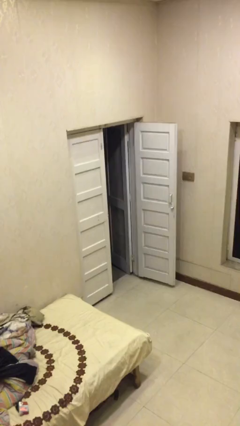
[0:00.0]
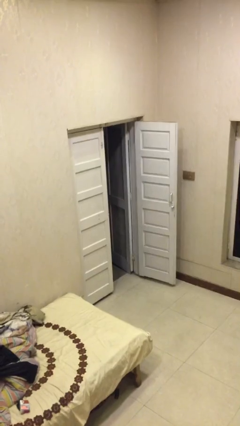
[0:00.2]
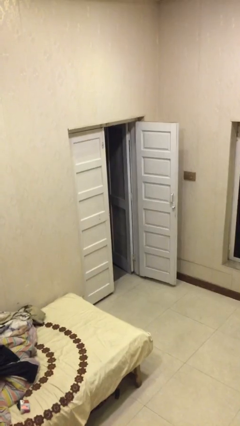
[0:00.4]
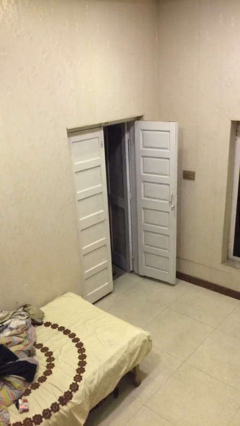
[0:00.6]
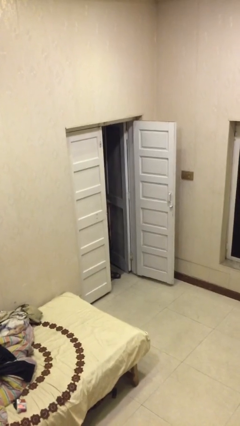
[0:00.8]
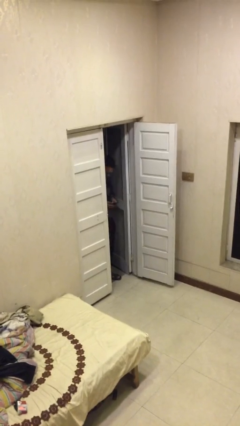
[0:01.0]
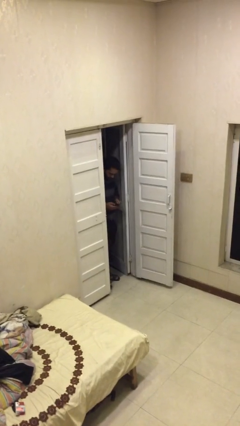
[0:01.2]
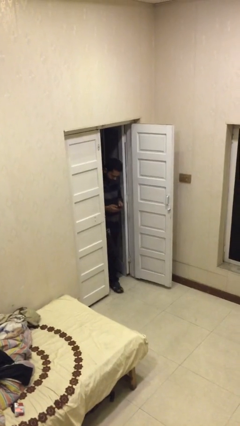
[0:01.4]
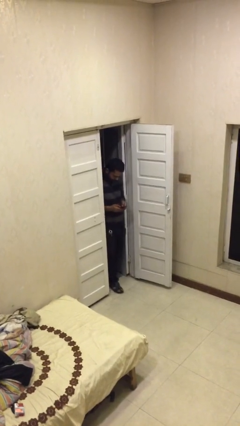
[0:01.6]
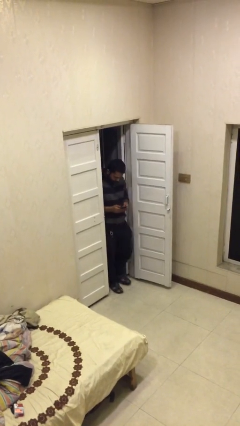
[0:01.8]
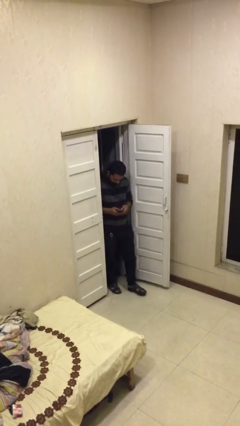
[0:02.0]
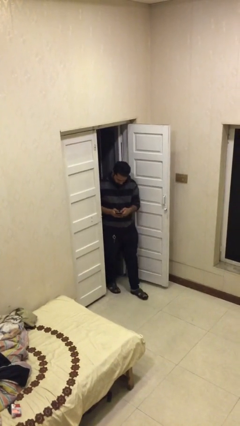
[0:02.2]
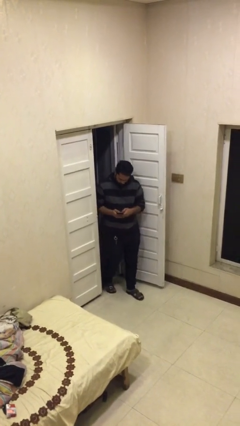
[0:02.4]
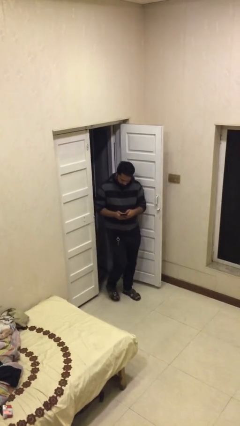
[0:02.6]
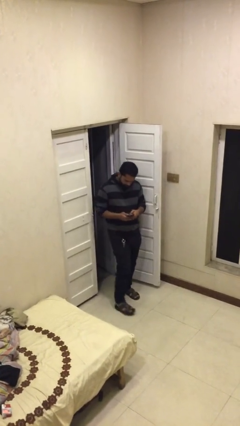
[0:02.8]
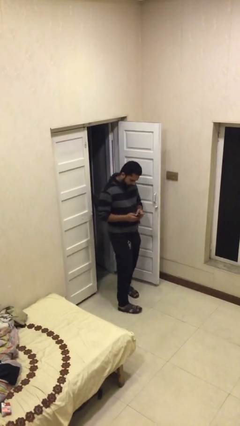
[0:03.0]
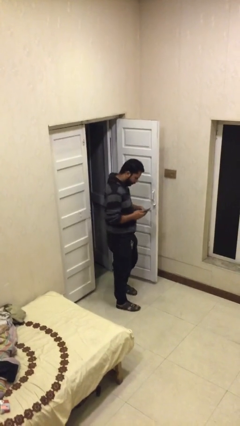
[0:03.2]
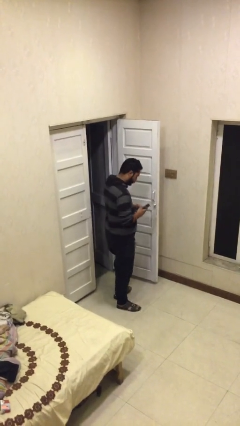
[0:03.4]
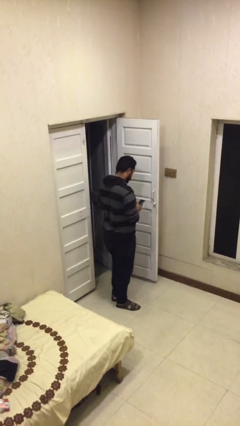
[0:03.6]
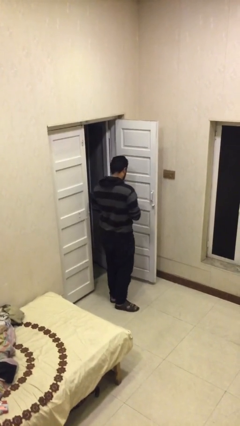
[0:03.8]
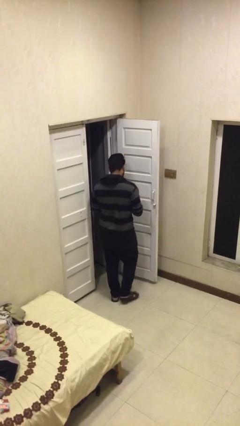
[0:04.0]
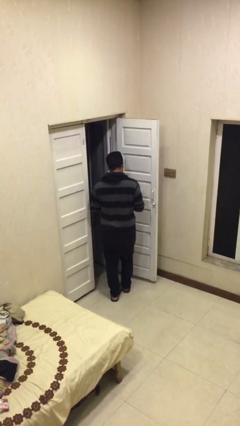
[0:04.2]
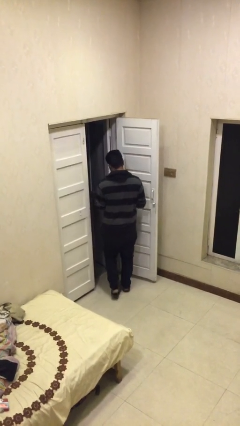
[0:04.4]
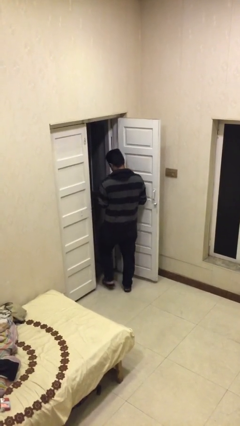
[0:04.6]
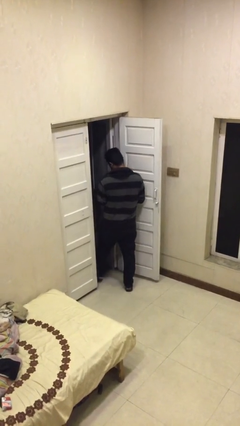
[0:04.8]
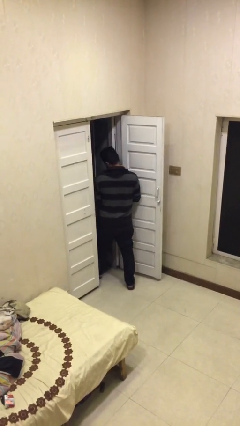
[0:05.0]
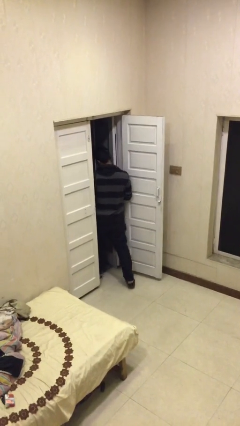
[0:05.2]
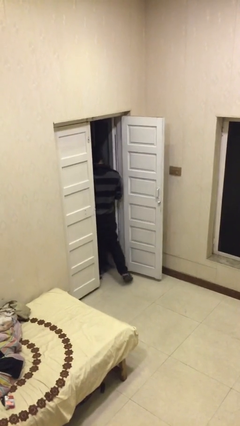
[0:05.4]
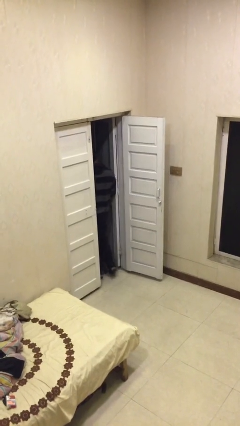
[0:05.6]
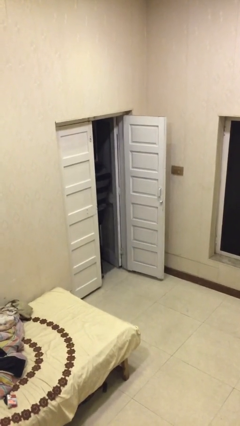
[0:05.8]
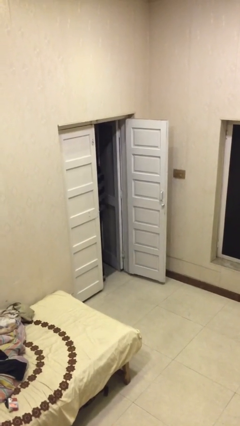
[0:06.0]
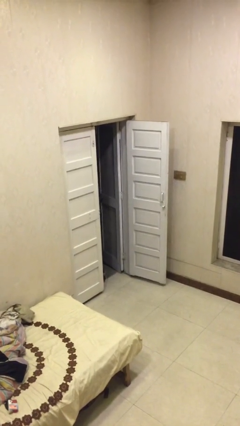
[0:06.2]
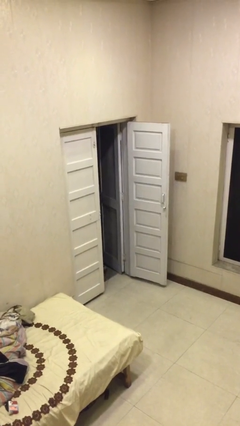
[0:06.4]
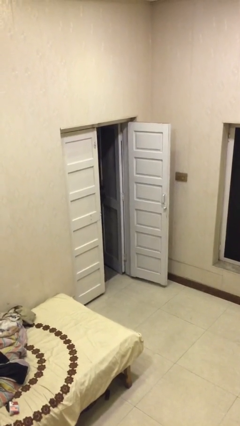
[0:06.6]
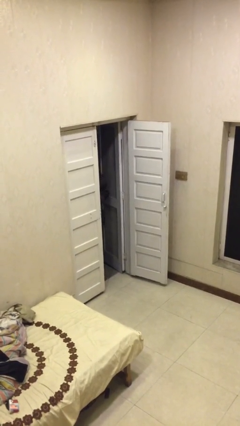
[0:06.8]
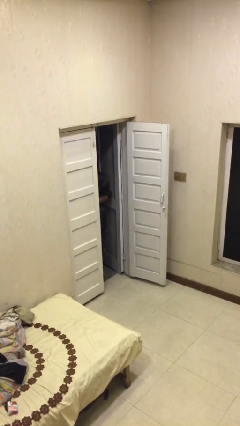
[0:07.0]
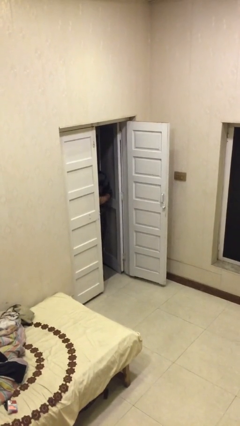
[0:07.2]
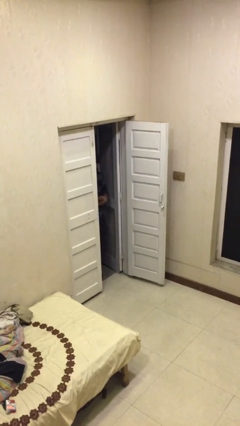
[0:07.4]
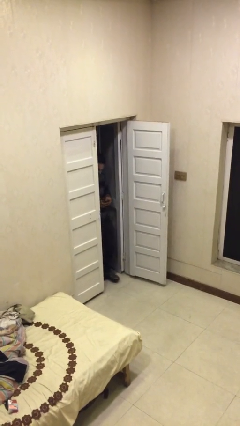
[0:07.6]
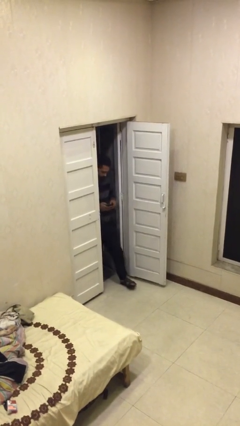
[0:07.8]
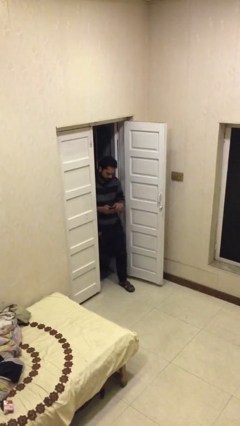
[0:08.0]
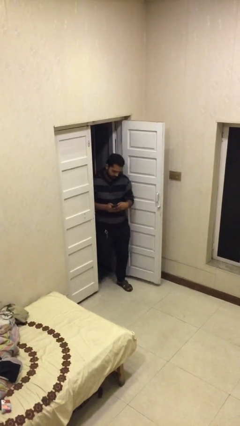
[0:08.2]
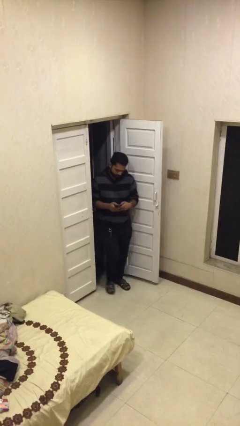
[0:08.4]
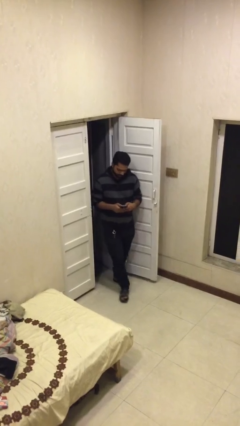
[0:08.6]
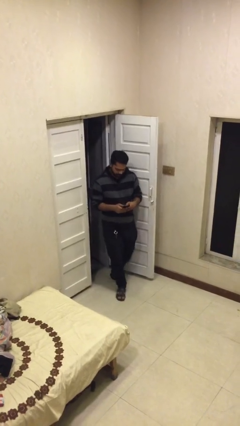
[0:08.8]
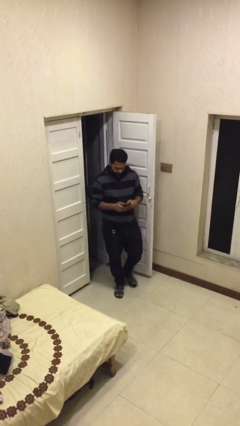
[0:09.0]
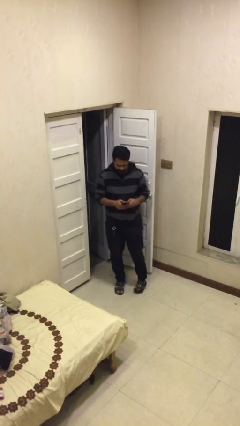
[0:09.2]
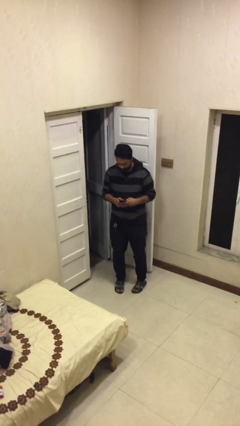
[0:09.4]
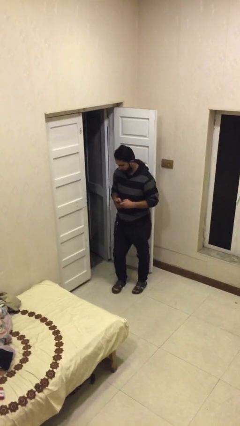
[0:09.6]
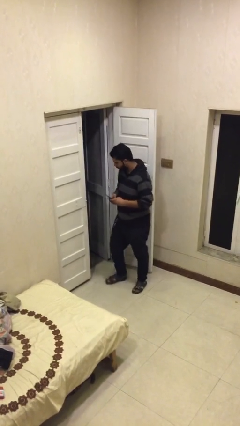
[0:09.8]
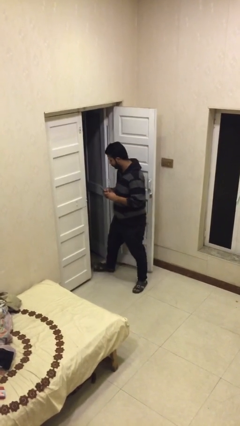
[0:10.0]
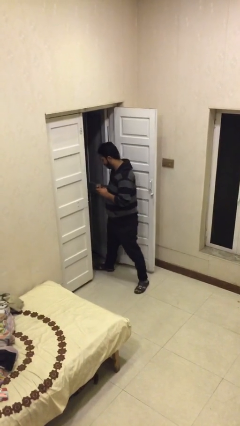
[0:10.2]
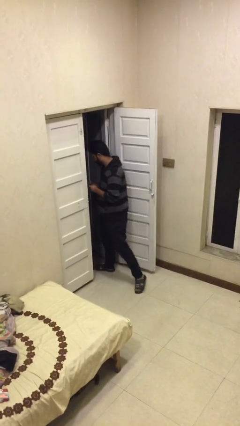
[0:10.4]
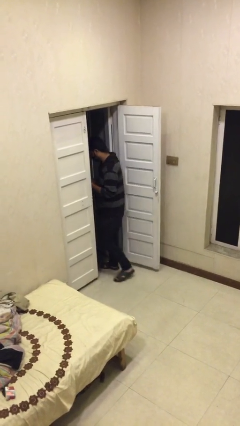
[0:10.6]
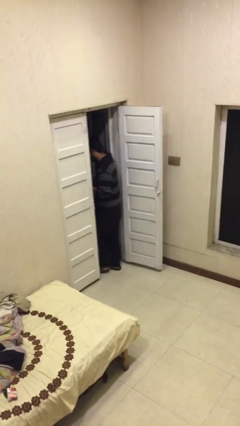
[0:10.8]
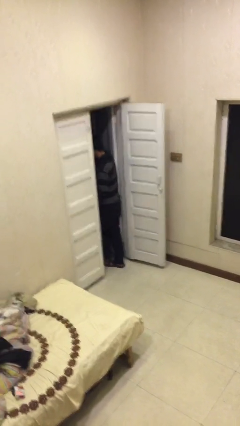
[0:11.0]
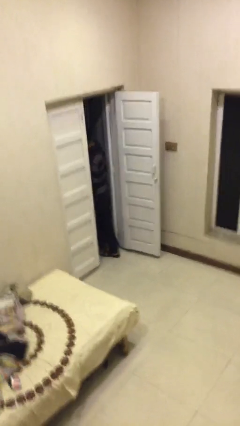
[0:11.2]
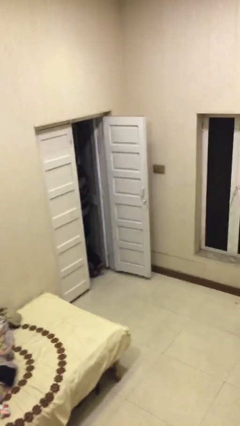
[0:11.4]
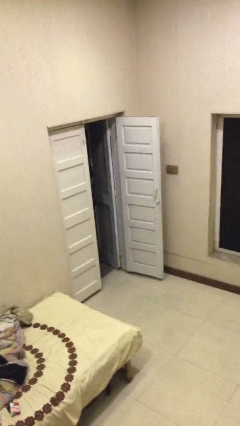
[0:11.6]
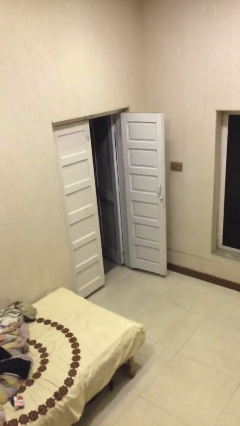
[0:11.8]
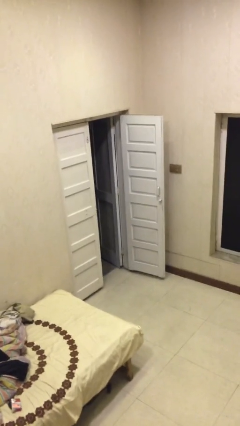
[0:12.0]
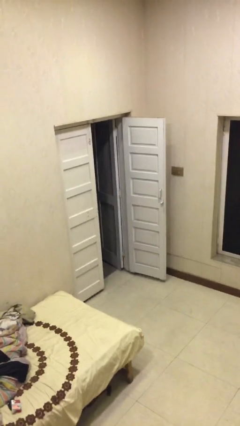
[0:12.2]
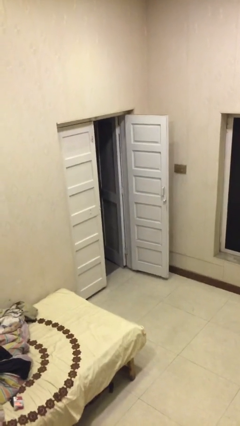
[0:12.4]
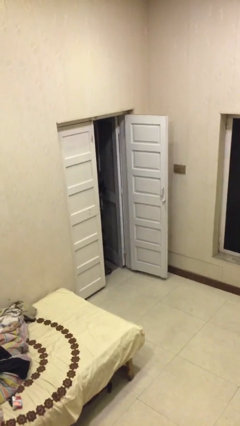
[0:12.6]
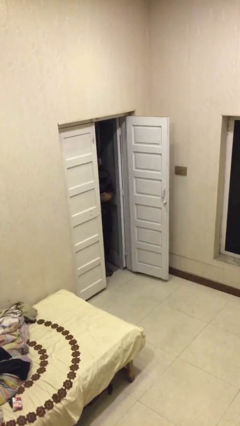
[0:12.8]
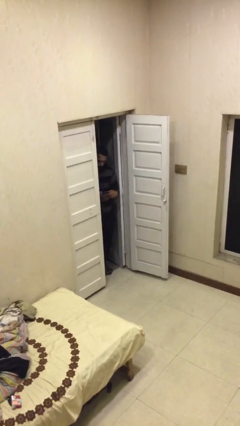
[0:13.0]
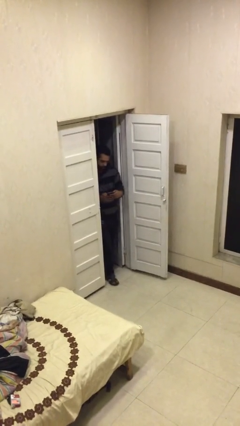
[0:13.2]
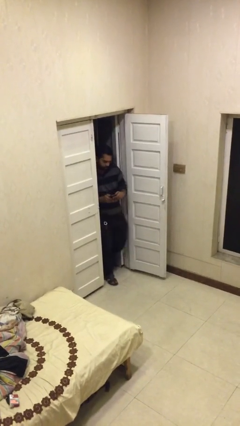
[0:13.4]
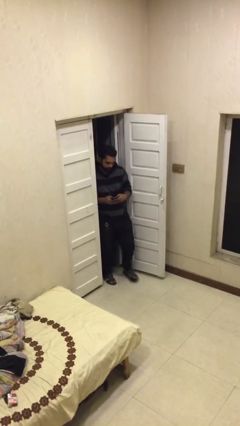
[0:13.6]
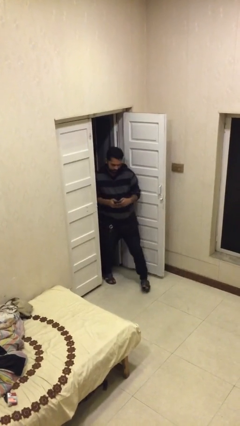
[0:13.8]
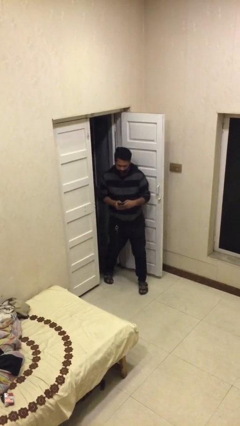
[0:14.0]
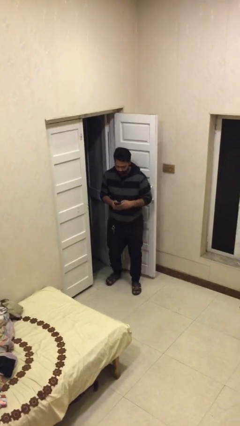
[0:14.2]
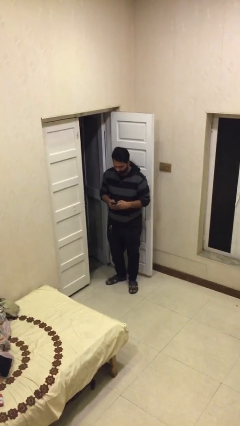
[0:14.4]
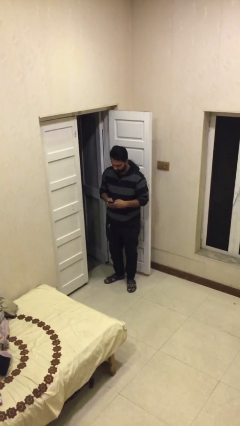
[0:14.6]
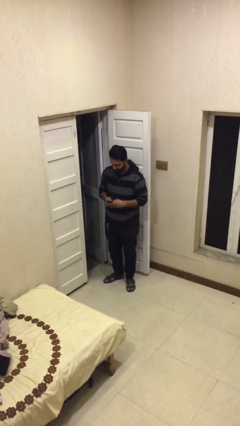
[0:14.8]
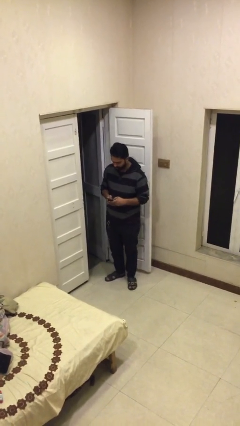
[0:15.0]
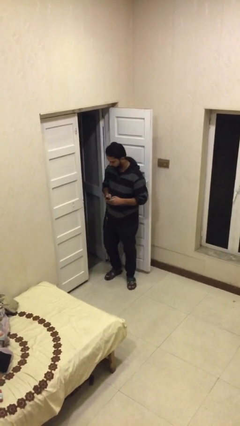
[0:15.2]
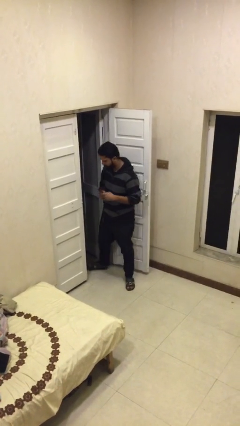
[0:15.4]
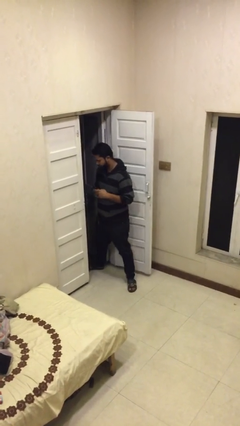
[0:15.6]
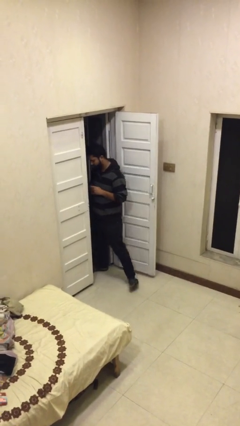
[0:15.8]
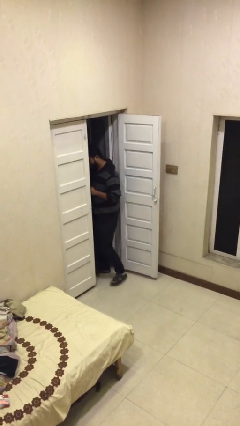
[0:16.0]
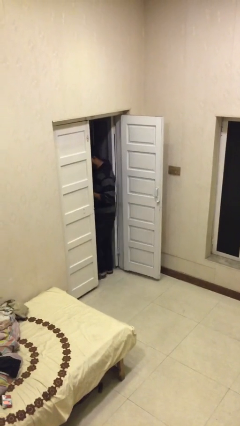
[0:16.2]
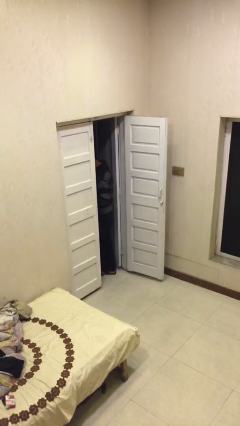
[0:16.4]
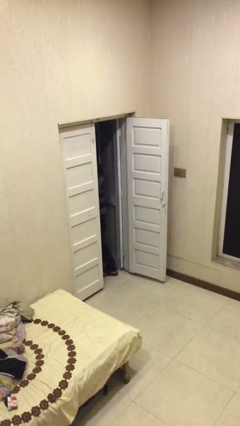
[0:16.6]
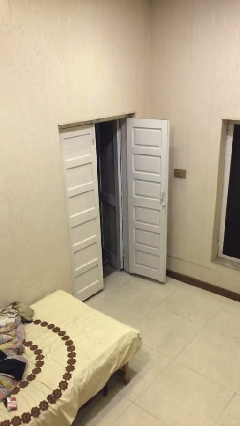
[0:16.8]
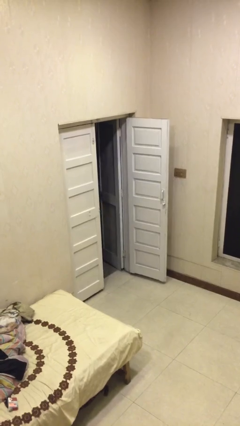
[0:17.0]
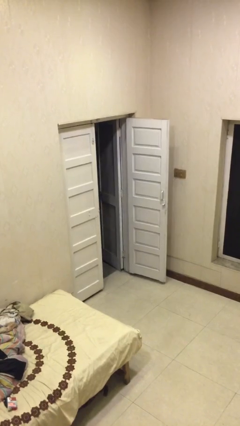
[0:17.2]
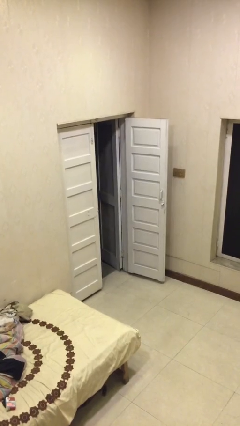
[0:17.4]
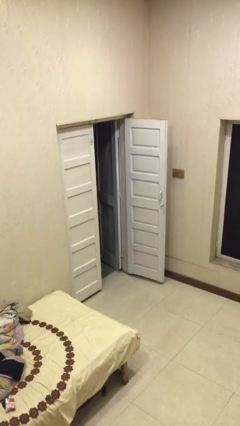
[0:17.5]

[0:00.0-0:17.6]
person texts on phone

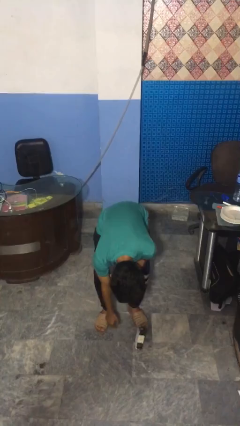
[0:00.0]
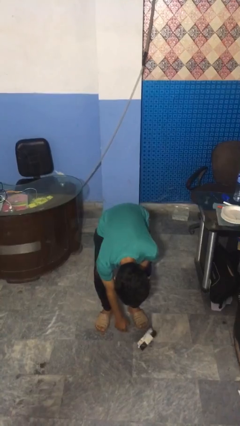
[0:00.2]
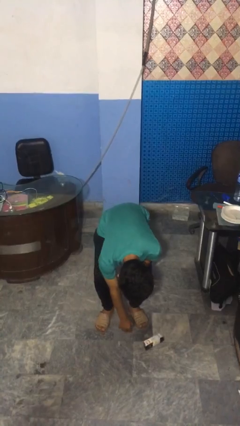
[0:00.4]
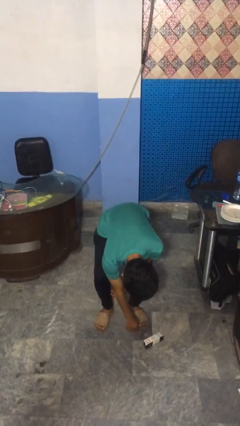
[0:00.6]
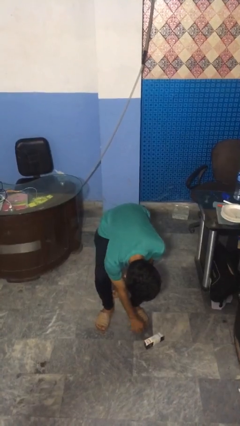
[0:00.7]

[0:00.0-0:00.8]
person catches dropped object
